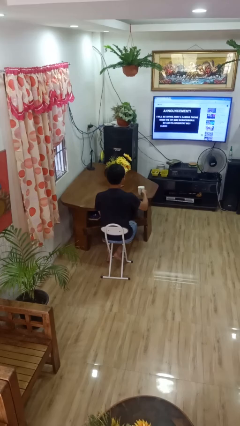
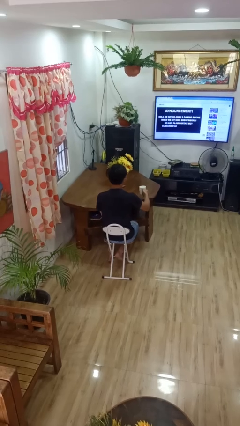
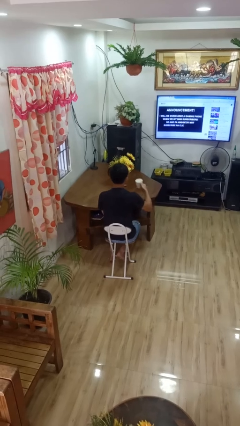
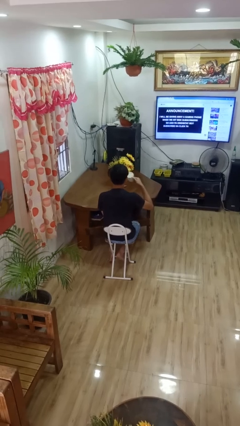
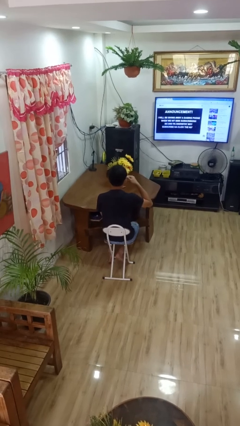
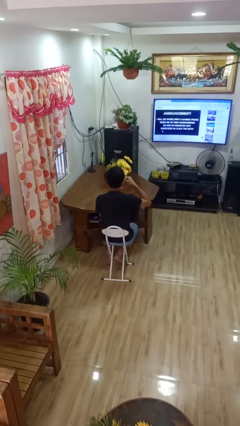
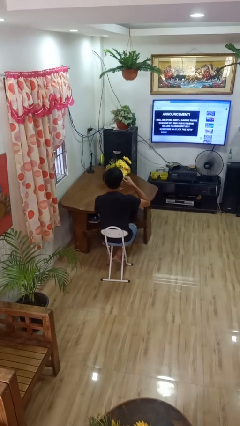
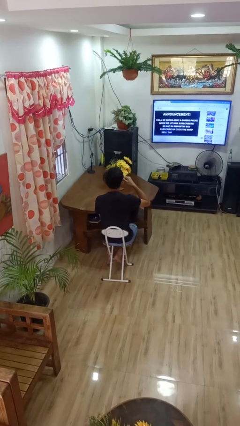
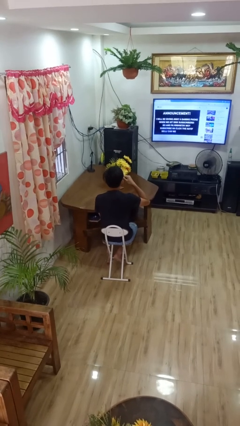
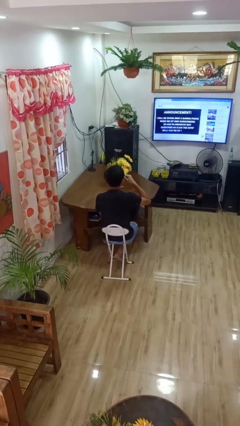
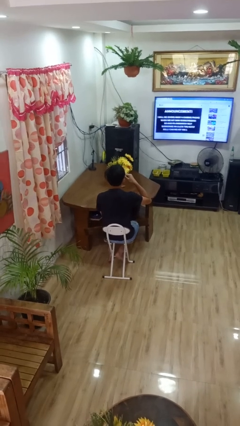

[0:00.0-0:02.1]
person drinks from mug

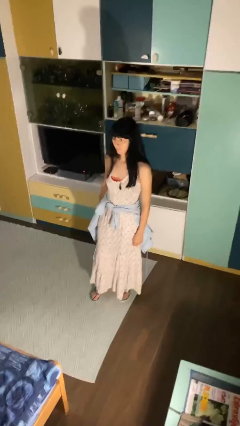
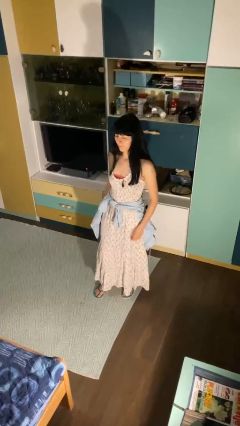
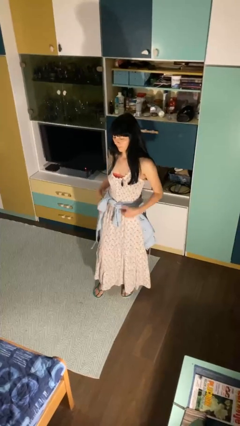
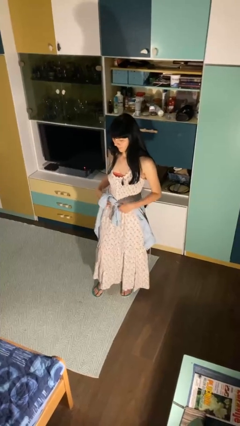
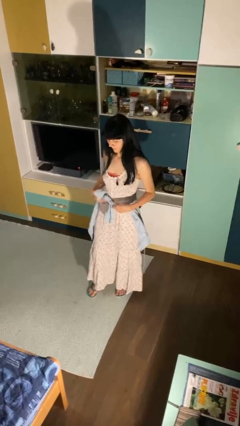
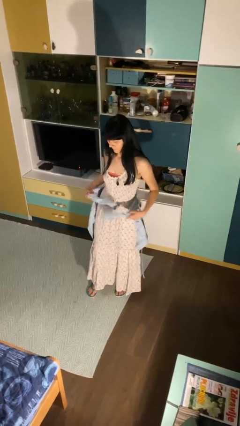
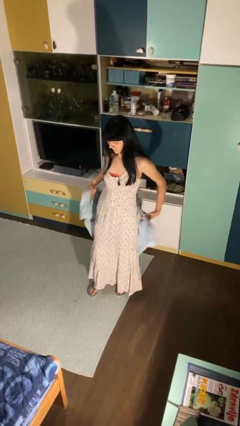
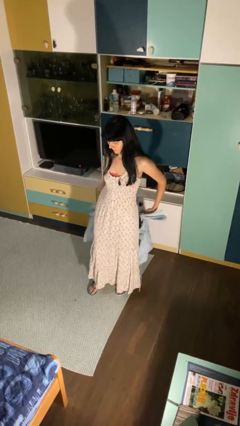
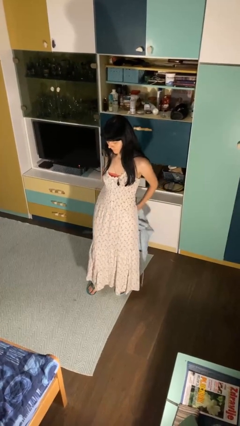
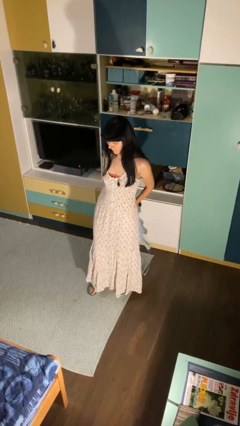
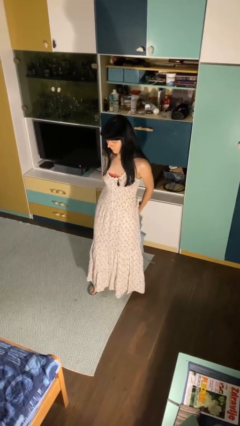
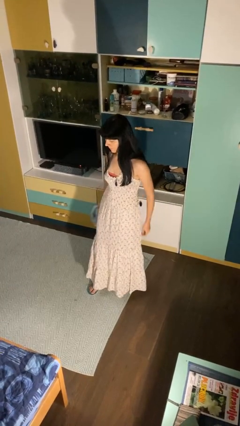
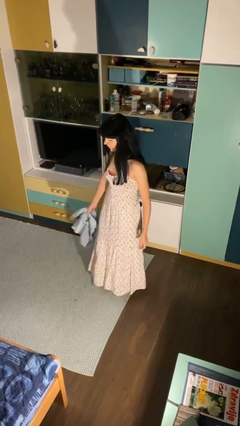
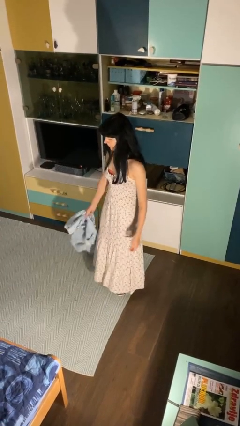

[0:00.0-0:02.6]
person unties jacket around waist

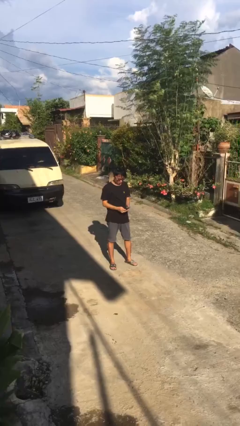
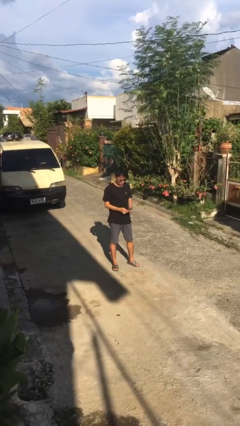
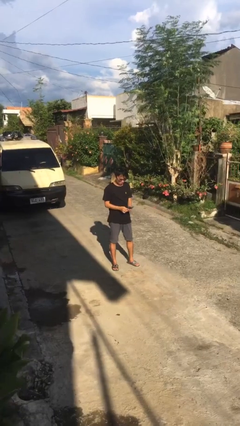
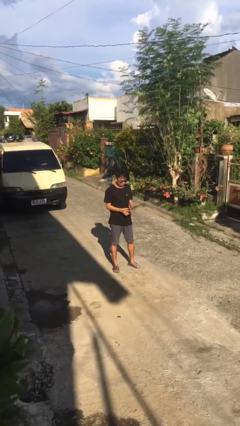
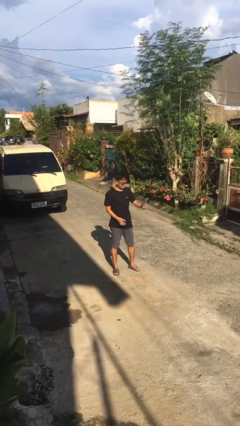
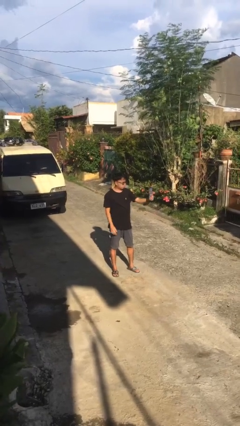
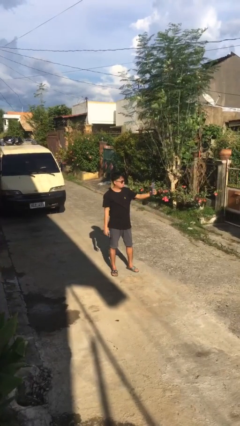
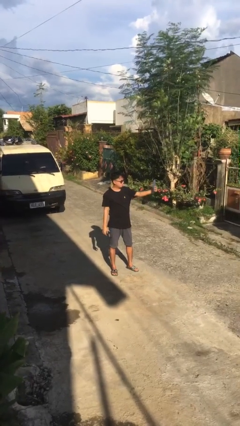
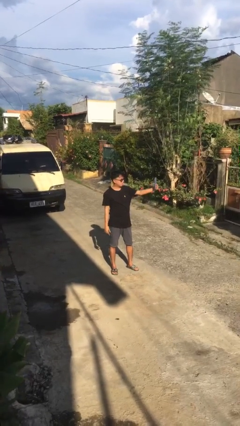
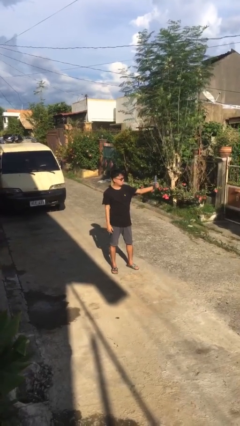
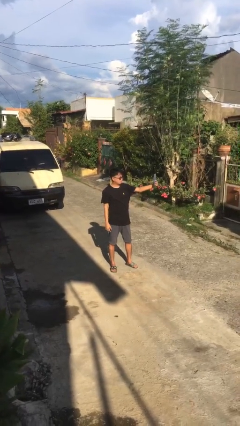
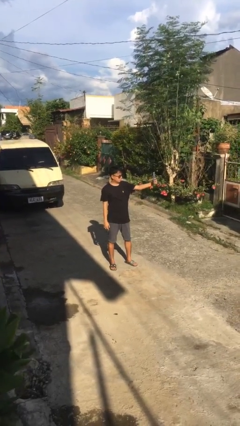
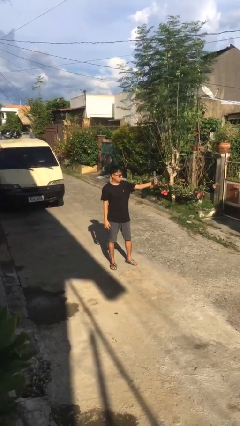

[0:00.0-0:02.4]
person takes selfie

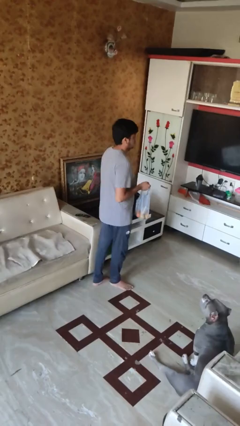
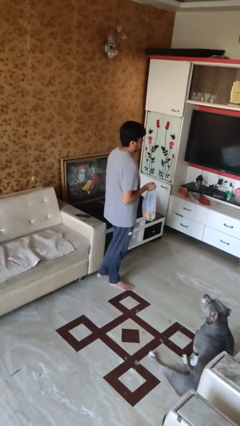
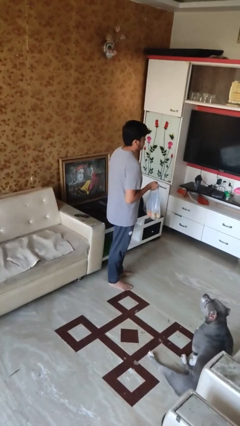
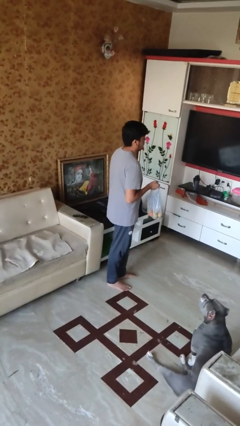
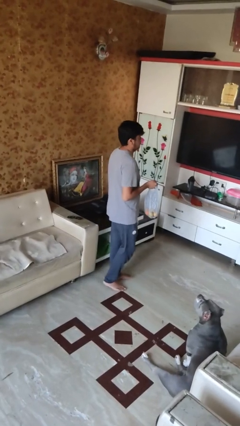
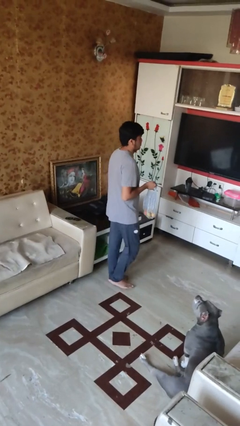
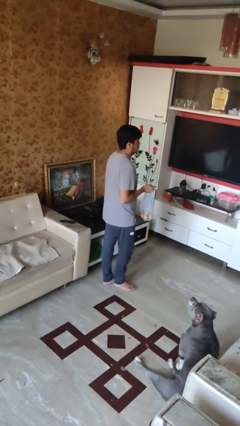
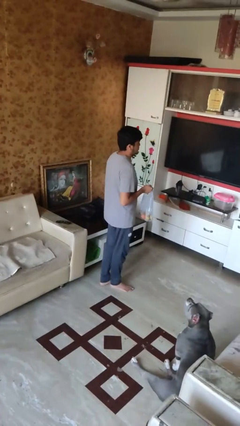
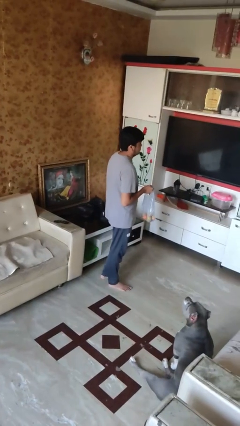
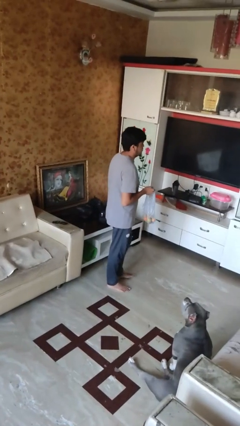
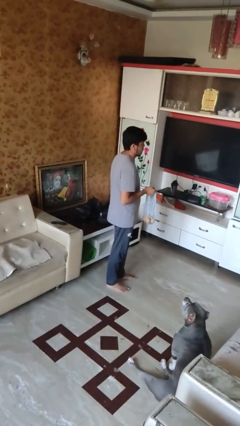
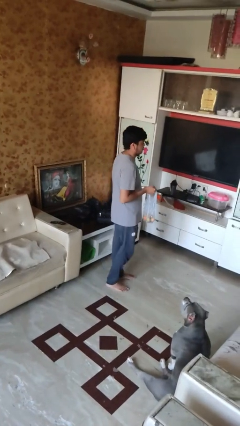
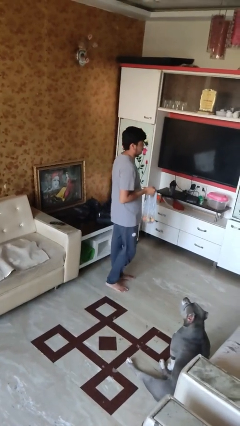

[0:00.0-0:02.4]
person carries groceries

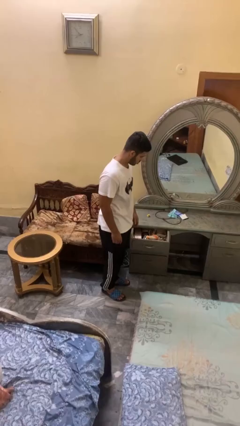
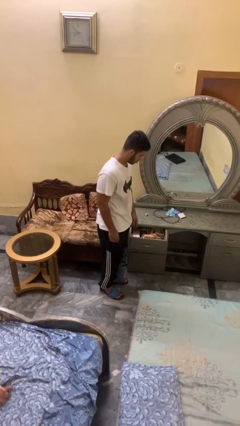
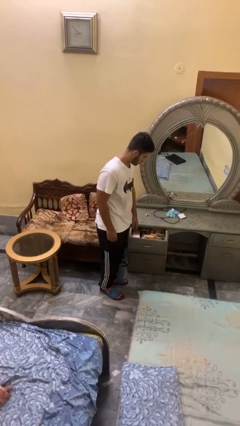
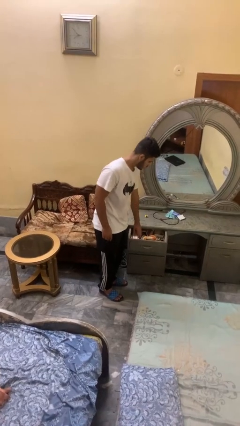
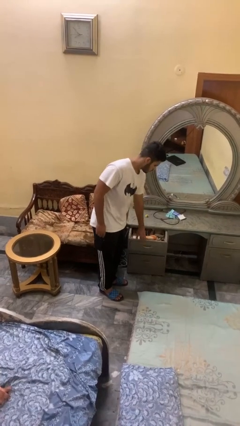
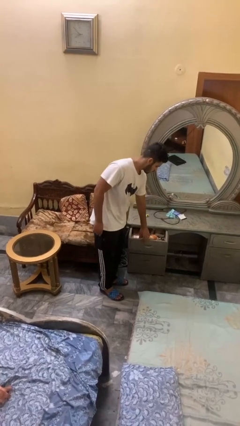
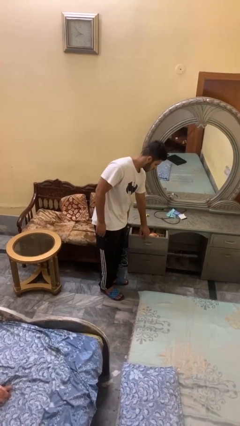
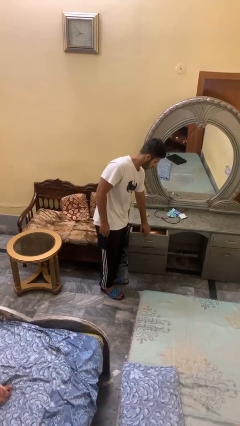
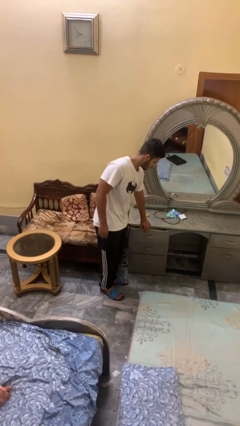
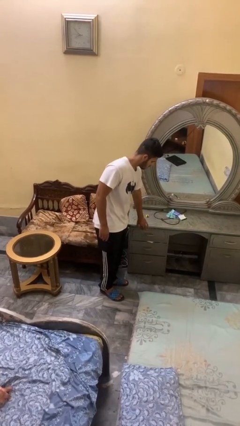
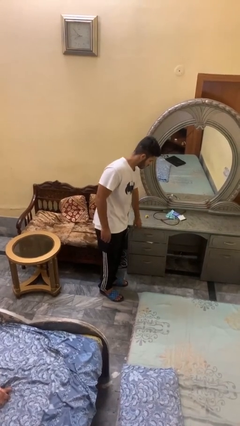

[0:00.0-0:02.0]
person closes dresser drawer

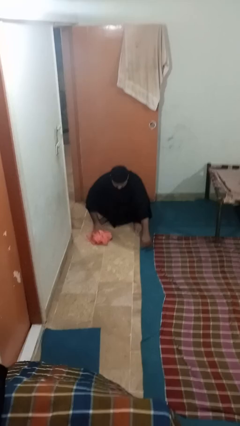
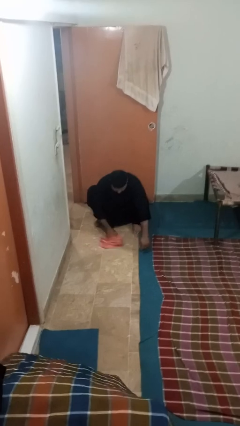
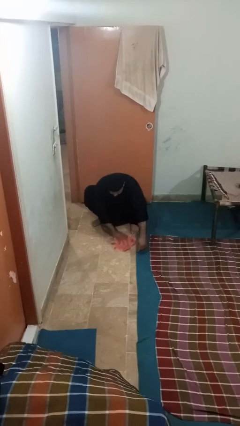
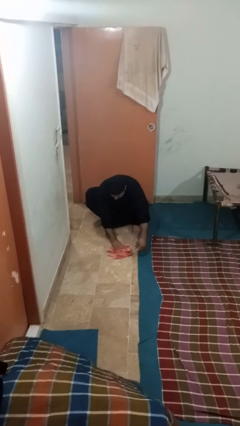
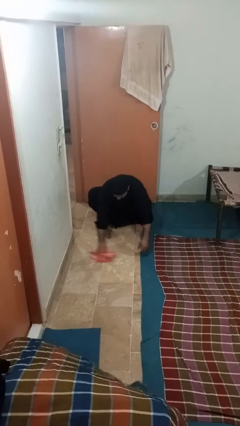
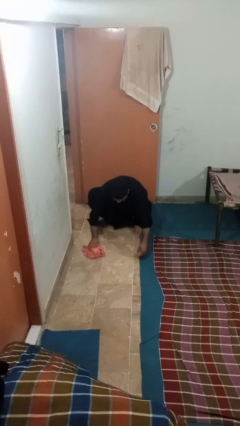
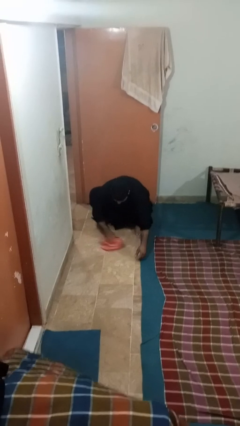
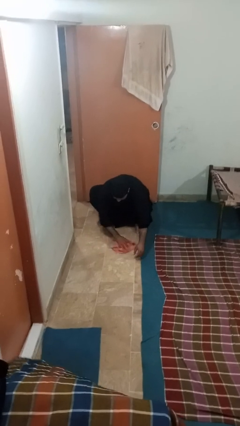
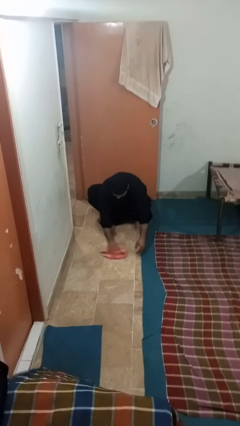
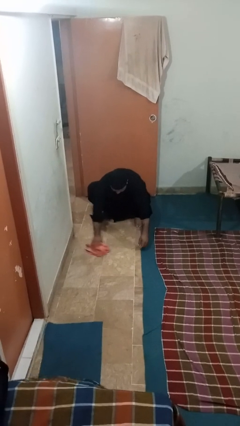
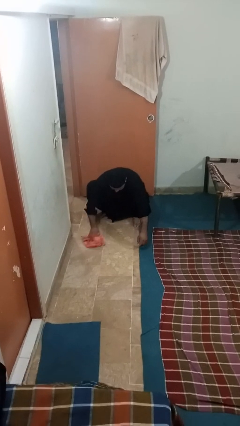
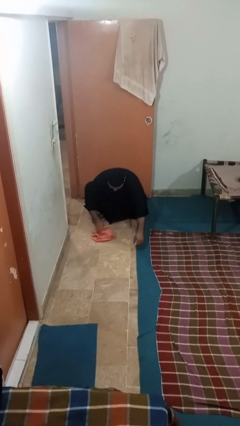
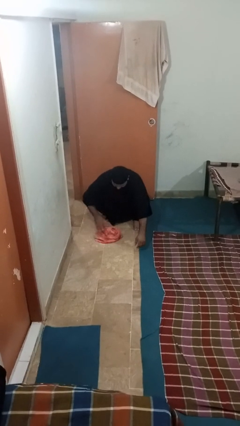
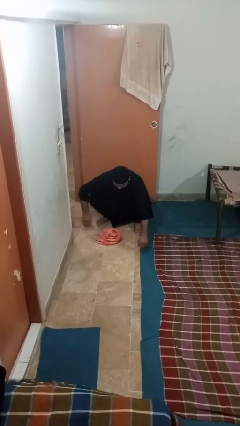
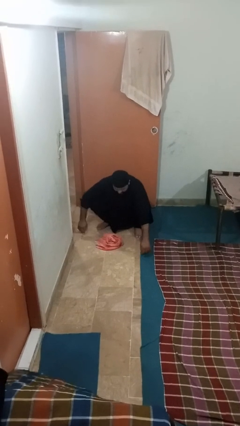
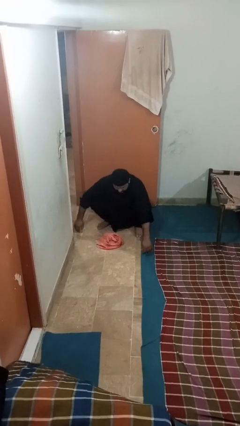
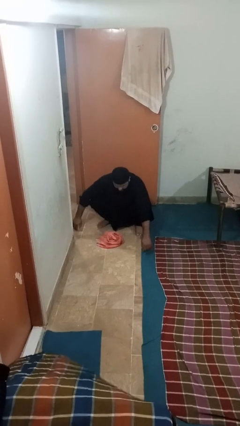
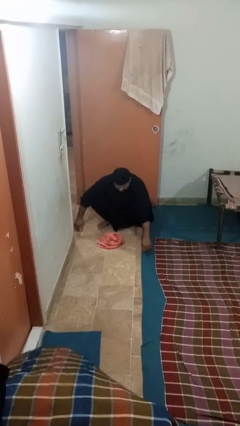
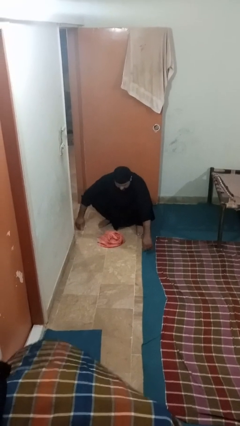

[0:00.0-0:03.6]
person mops

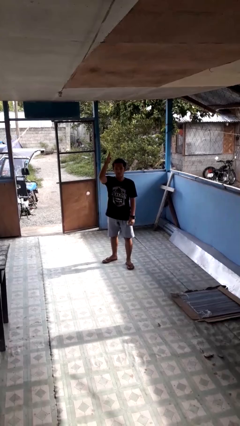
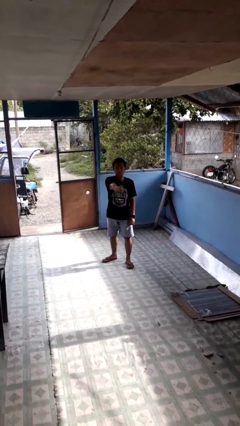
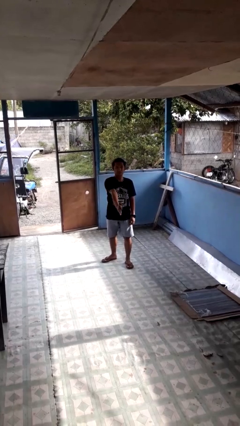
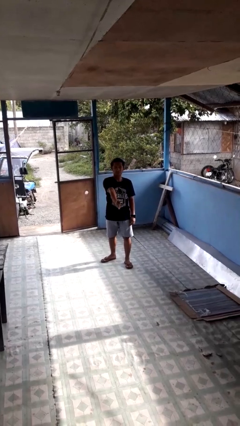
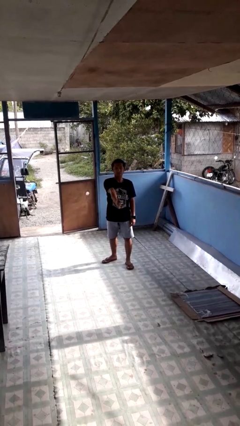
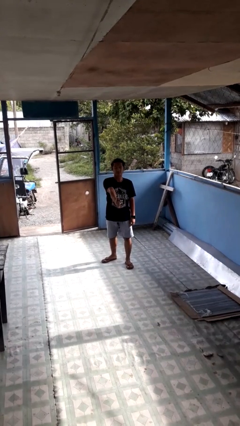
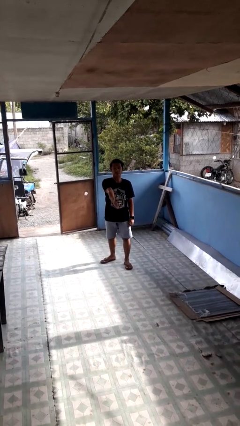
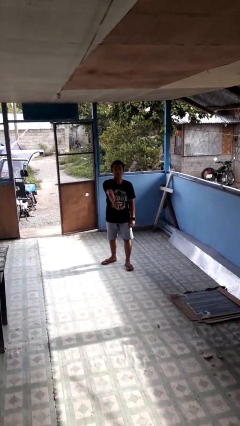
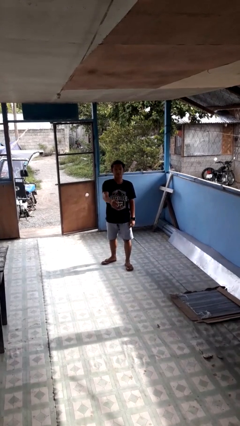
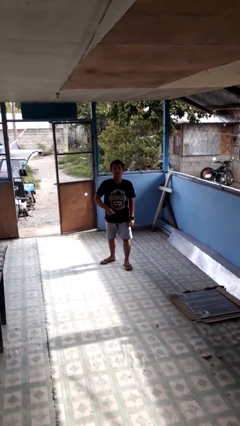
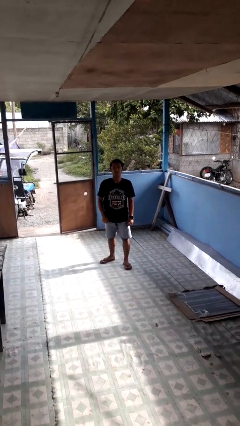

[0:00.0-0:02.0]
person karate chop
